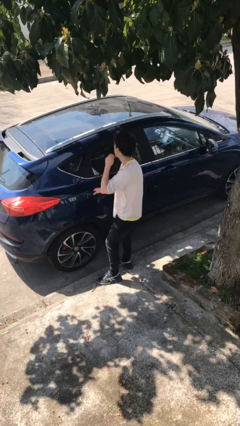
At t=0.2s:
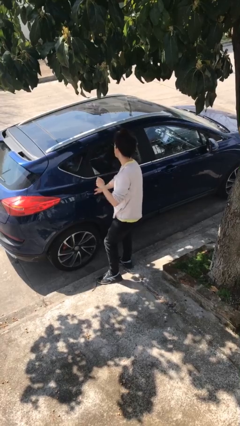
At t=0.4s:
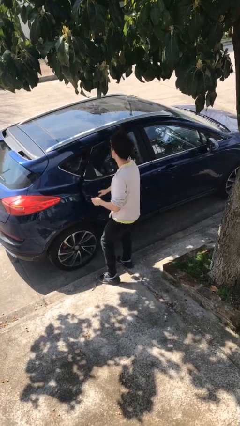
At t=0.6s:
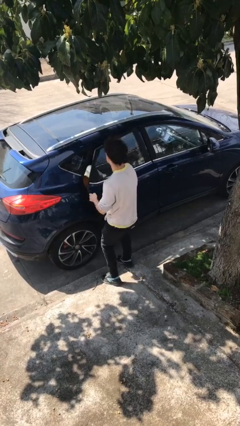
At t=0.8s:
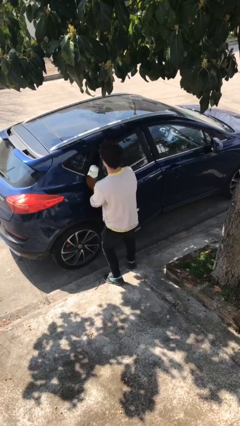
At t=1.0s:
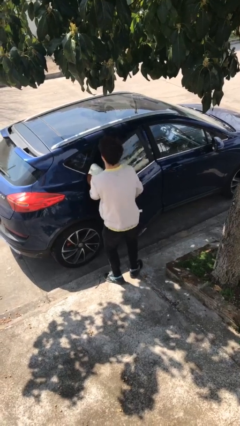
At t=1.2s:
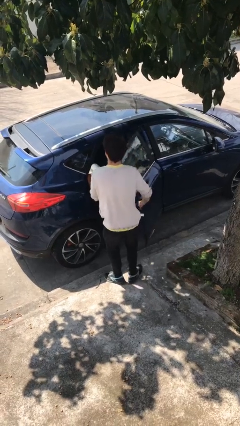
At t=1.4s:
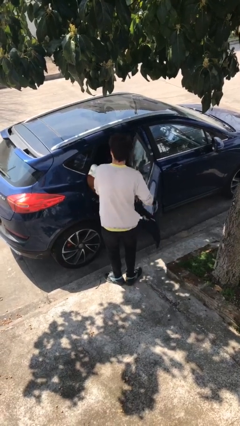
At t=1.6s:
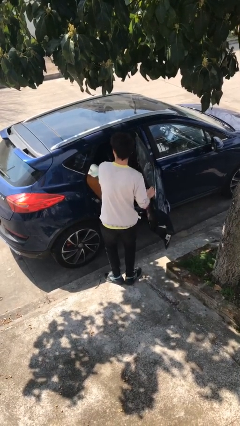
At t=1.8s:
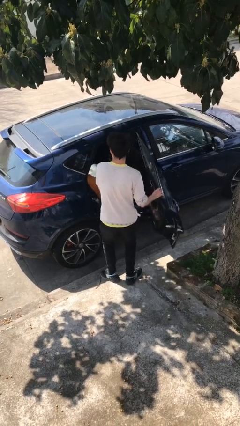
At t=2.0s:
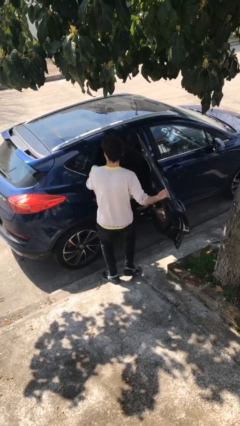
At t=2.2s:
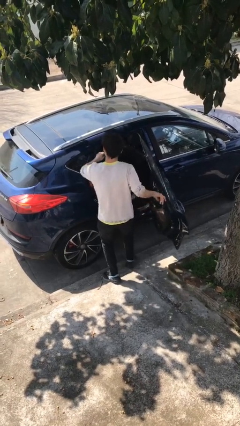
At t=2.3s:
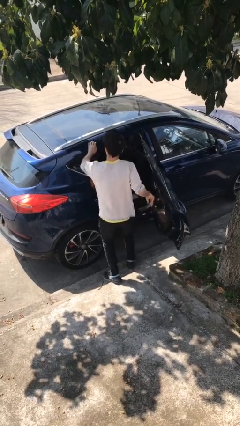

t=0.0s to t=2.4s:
person opens car door

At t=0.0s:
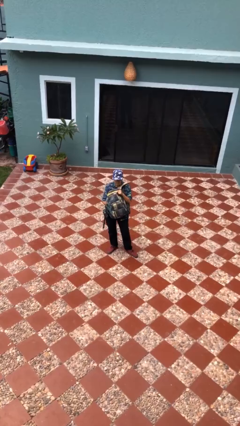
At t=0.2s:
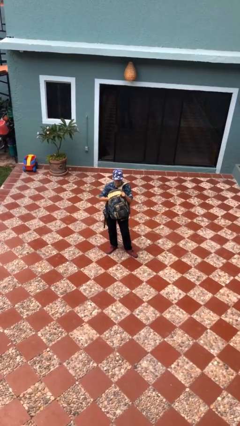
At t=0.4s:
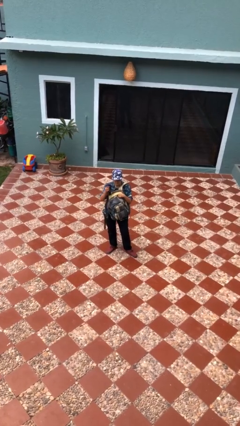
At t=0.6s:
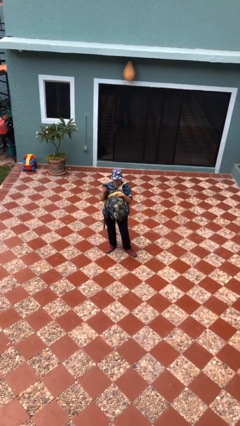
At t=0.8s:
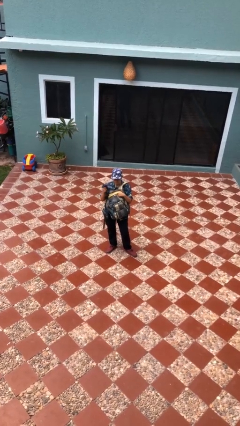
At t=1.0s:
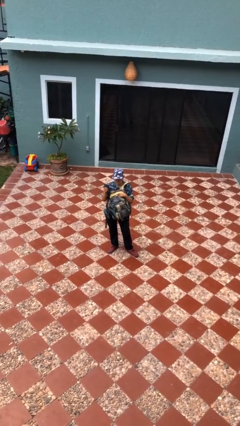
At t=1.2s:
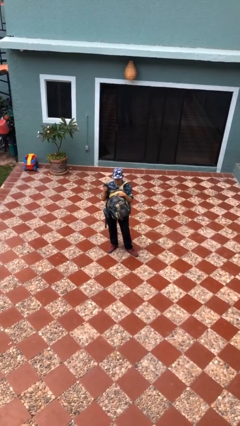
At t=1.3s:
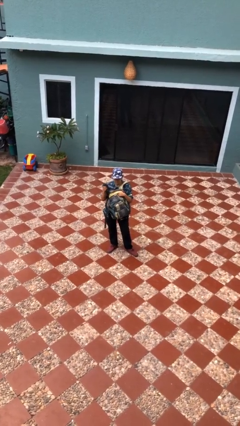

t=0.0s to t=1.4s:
person takes object from backpack

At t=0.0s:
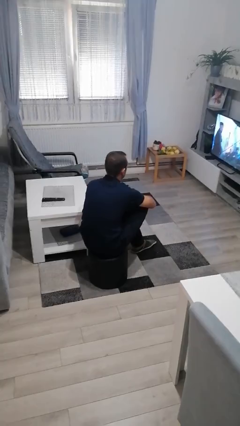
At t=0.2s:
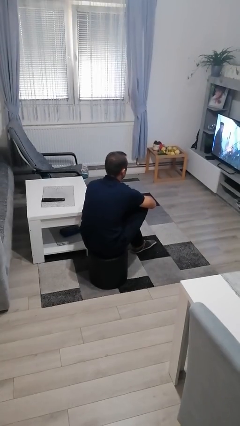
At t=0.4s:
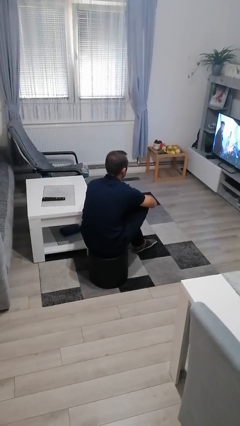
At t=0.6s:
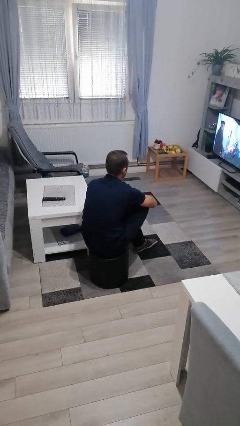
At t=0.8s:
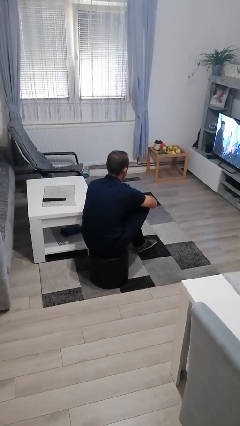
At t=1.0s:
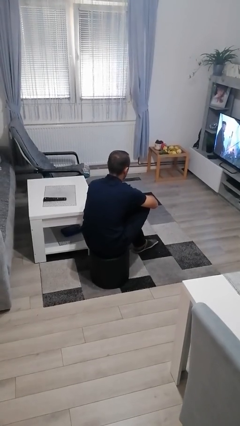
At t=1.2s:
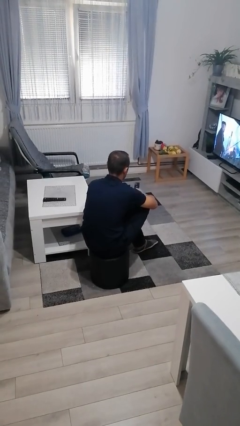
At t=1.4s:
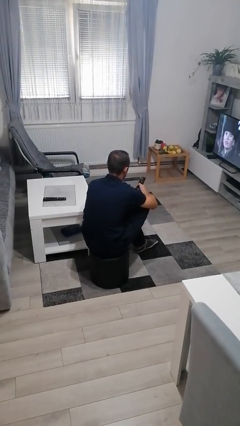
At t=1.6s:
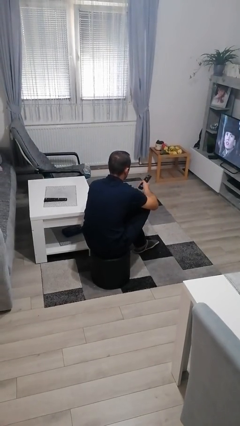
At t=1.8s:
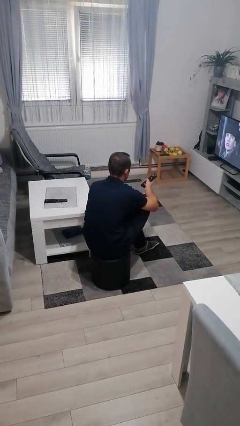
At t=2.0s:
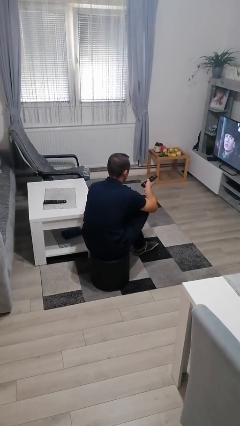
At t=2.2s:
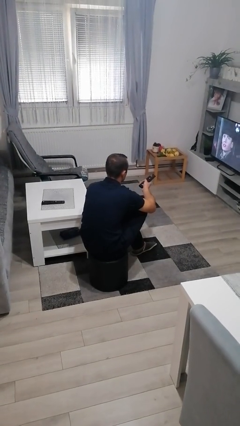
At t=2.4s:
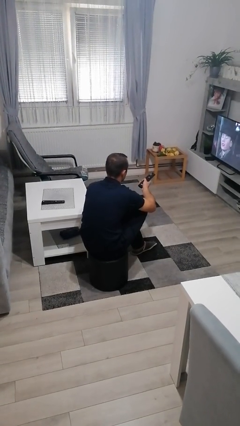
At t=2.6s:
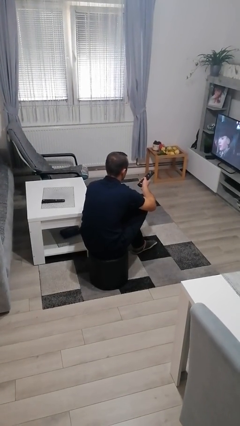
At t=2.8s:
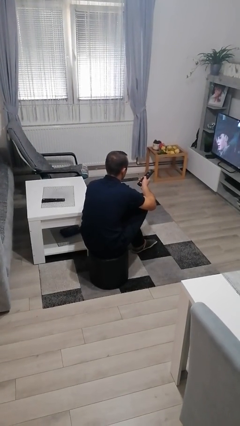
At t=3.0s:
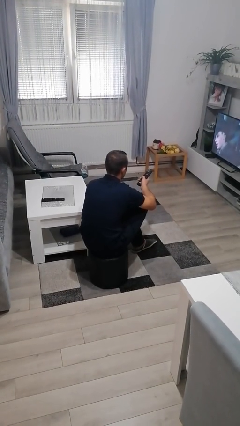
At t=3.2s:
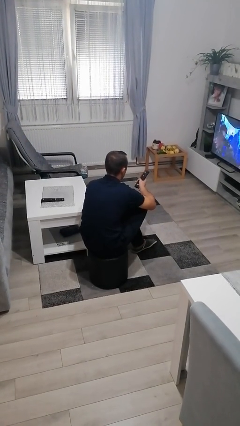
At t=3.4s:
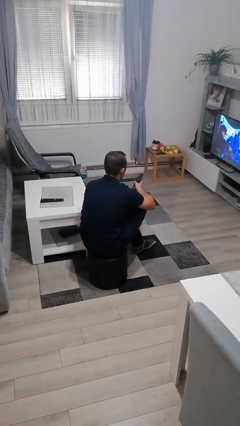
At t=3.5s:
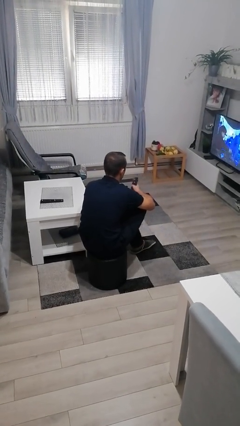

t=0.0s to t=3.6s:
person uses television remote

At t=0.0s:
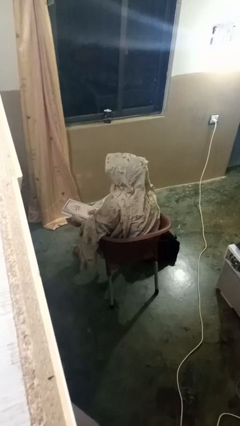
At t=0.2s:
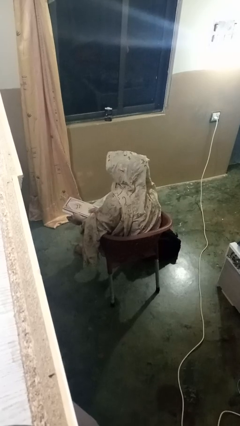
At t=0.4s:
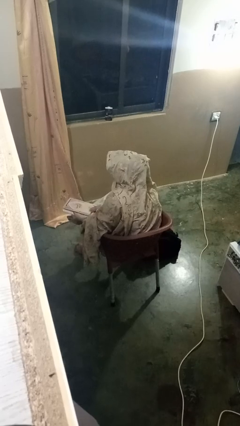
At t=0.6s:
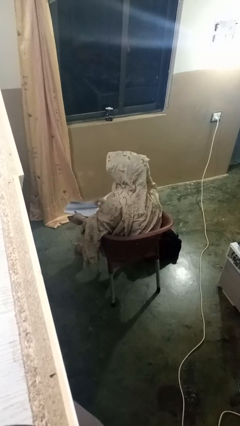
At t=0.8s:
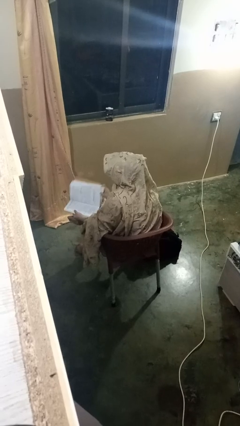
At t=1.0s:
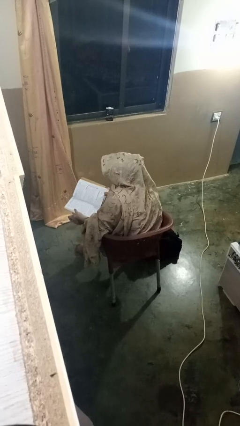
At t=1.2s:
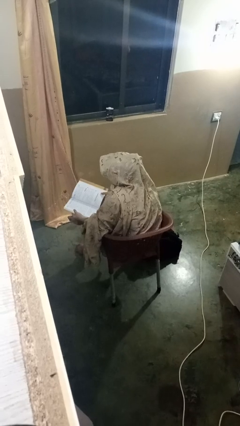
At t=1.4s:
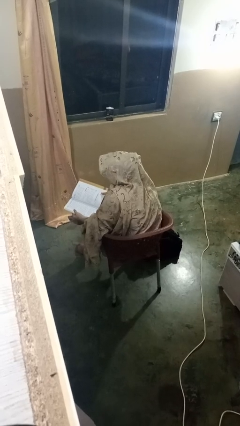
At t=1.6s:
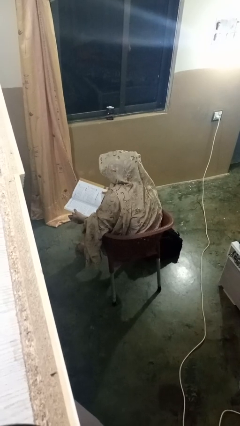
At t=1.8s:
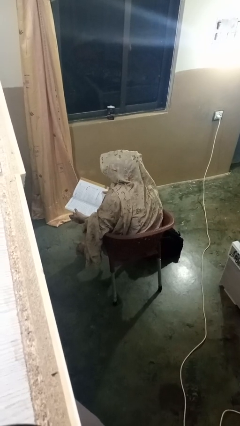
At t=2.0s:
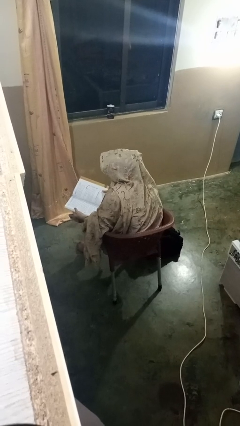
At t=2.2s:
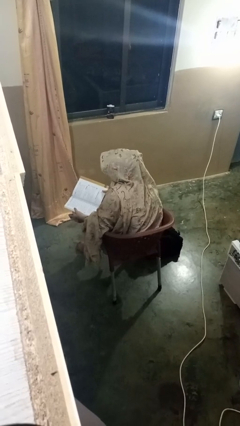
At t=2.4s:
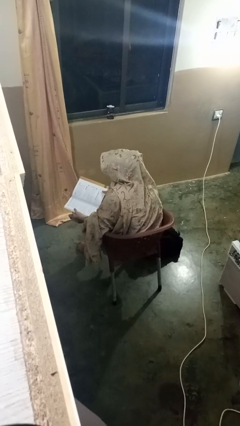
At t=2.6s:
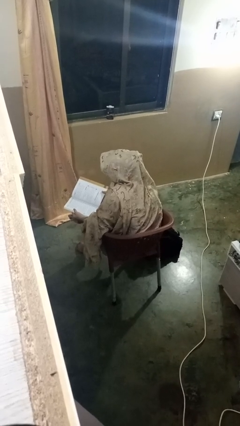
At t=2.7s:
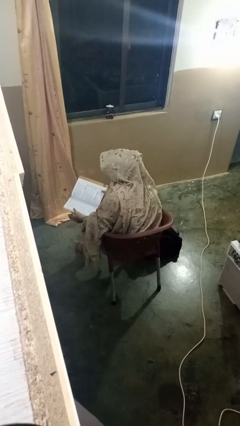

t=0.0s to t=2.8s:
person reads book

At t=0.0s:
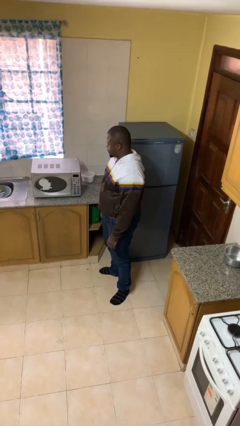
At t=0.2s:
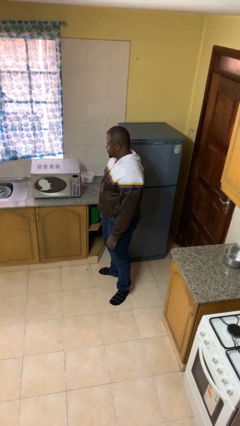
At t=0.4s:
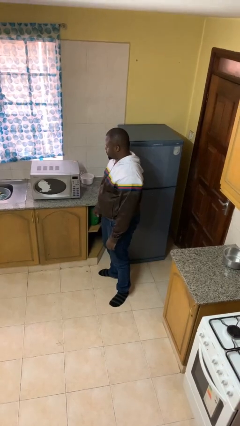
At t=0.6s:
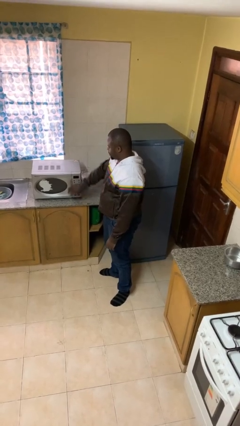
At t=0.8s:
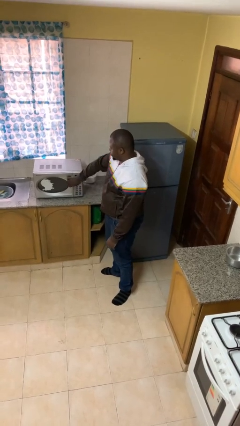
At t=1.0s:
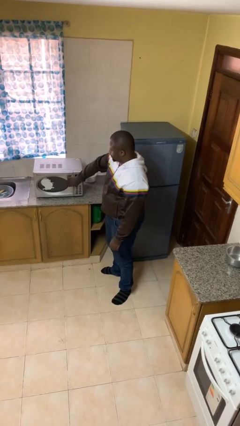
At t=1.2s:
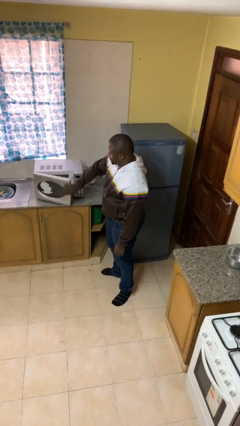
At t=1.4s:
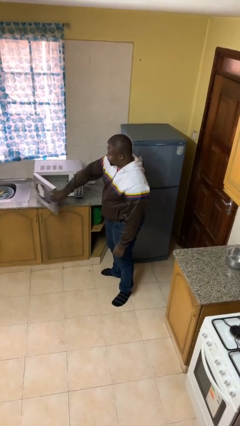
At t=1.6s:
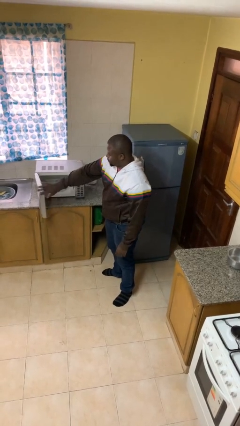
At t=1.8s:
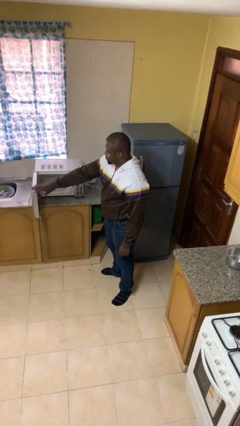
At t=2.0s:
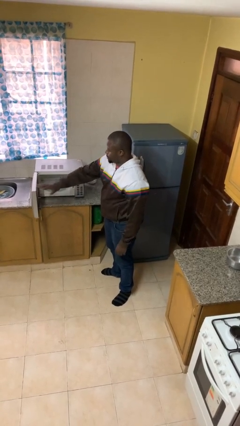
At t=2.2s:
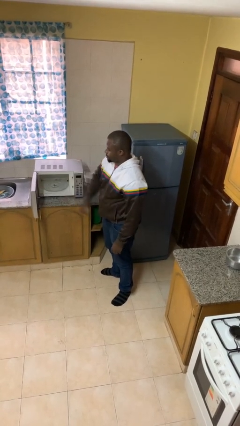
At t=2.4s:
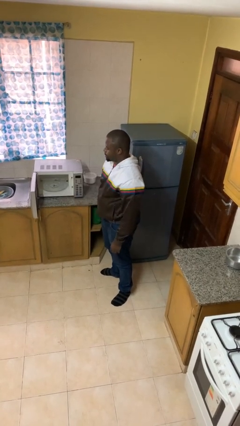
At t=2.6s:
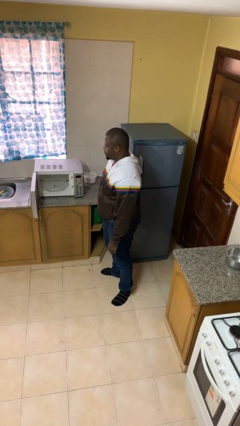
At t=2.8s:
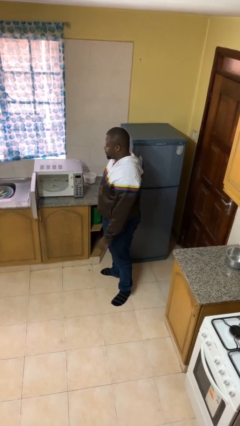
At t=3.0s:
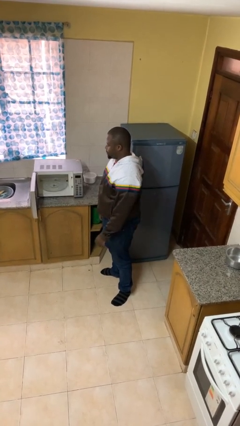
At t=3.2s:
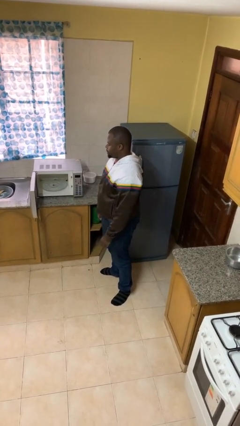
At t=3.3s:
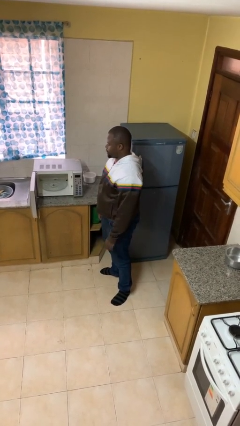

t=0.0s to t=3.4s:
person opens microwave

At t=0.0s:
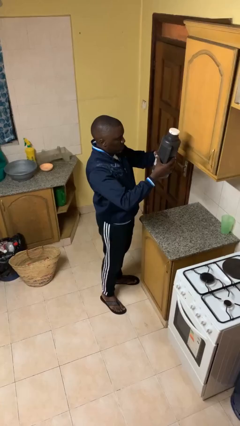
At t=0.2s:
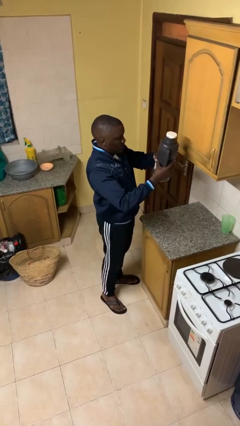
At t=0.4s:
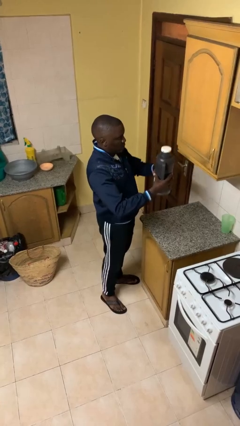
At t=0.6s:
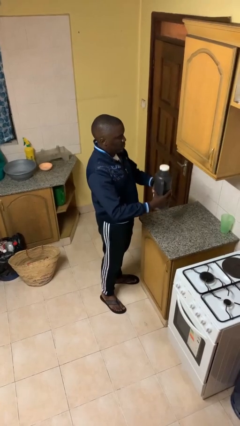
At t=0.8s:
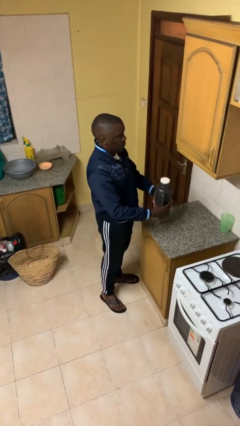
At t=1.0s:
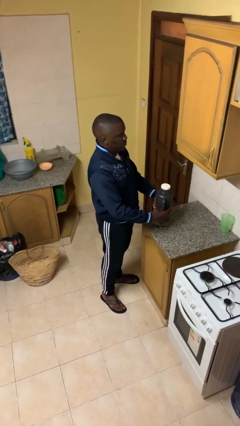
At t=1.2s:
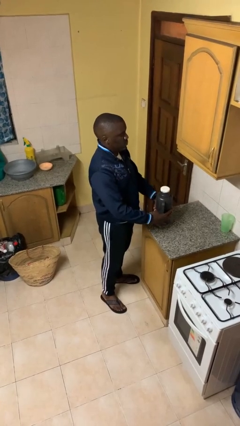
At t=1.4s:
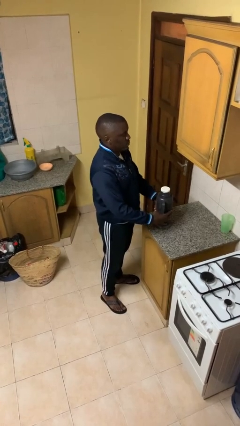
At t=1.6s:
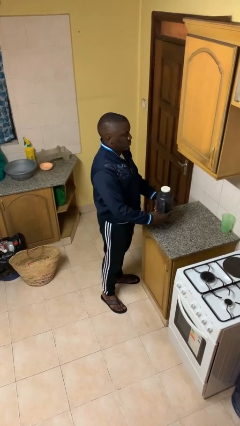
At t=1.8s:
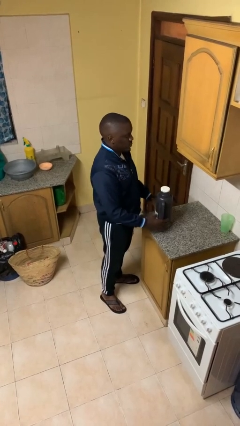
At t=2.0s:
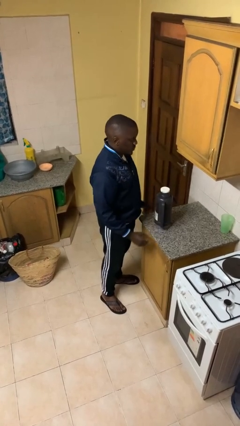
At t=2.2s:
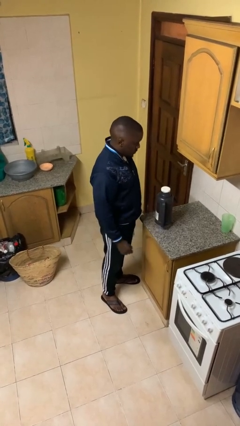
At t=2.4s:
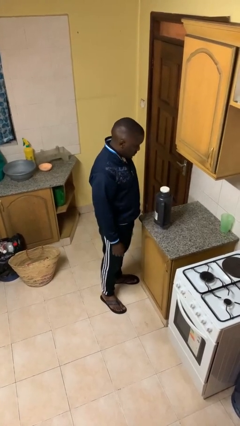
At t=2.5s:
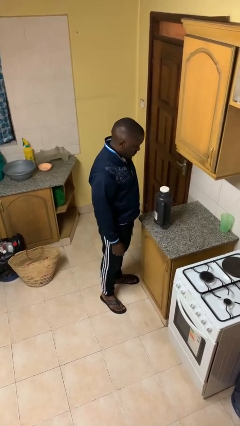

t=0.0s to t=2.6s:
person puts down object on countertop

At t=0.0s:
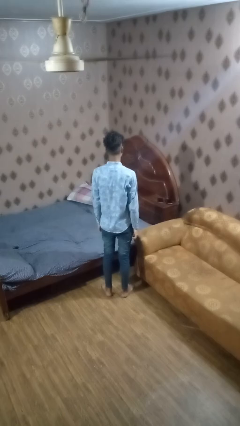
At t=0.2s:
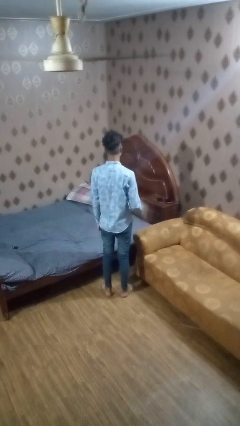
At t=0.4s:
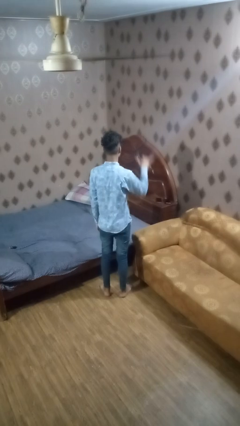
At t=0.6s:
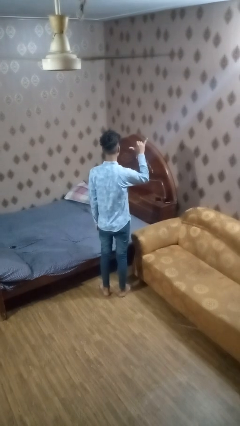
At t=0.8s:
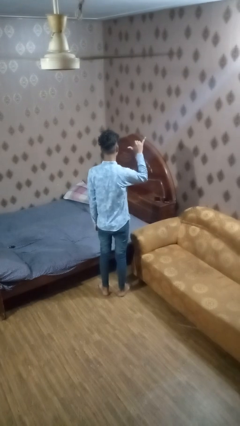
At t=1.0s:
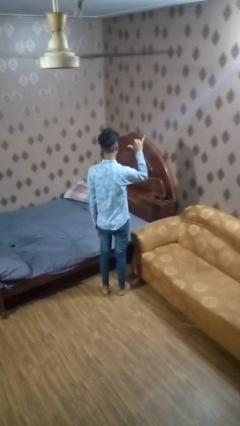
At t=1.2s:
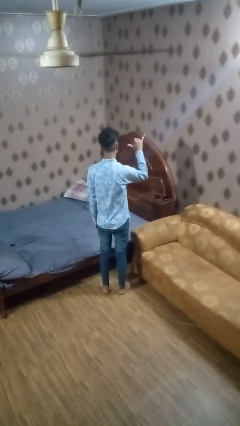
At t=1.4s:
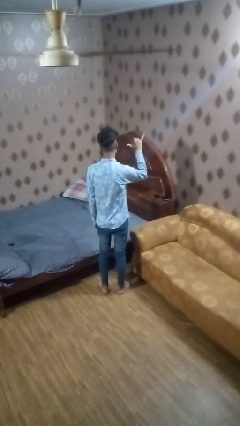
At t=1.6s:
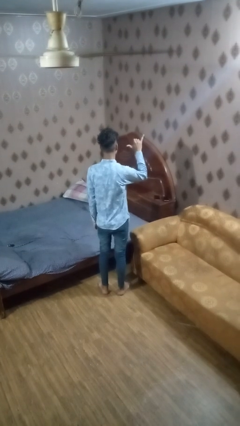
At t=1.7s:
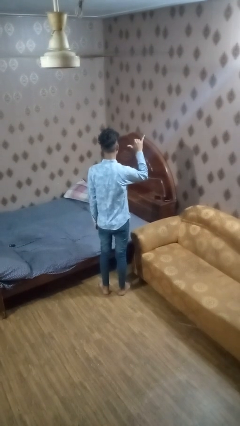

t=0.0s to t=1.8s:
person gestures hang loose
